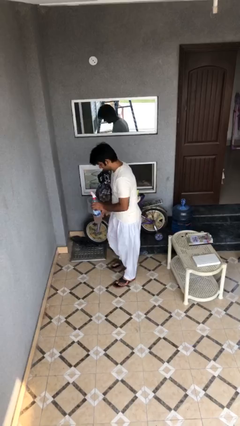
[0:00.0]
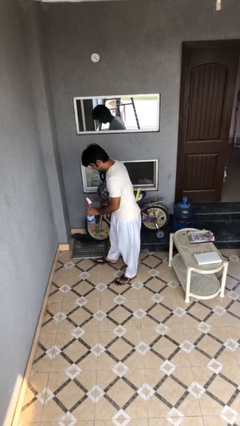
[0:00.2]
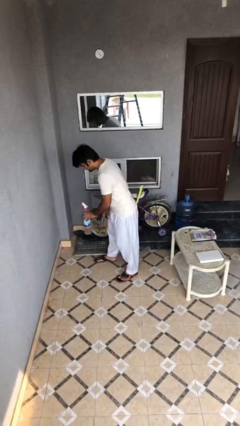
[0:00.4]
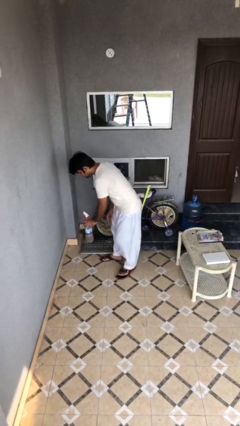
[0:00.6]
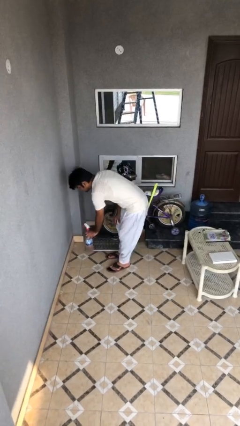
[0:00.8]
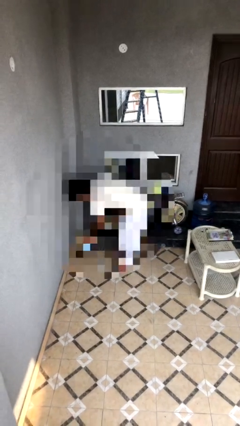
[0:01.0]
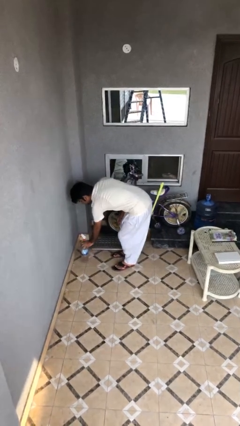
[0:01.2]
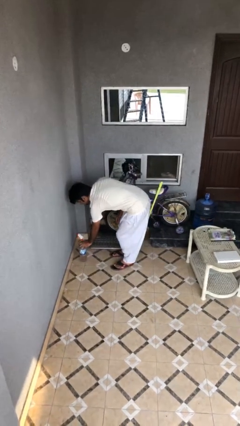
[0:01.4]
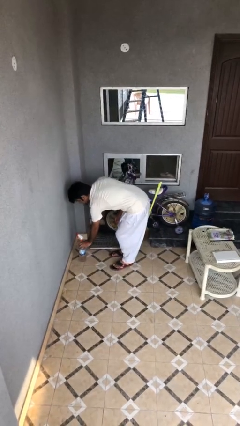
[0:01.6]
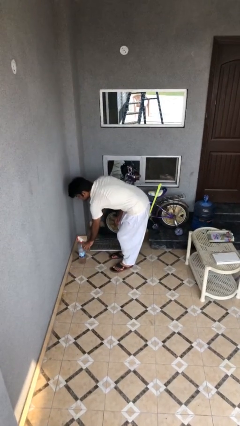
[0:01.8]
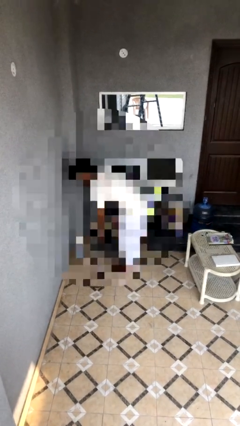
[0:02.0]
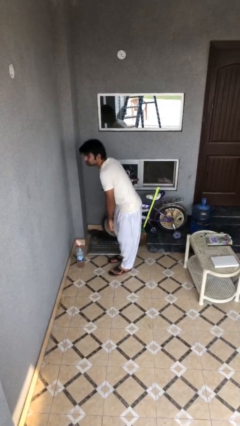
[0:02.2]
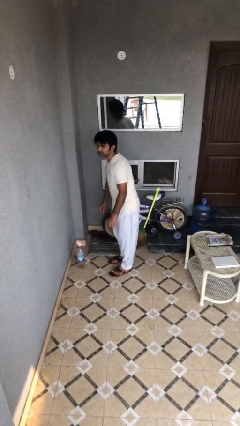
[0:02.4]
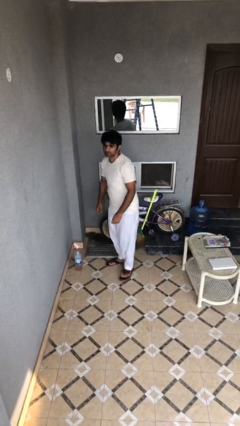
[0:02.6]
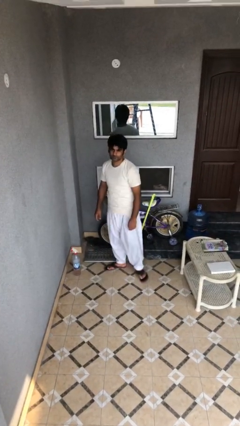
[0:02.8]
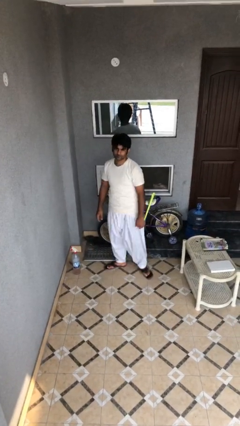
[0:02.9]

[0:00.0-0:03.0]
person puts down object on floor

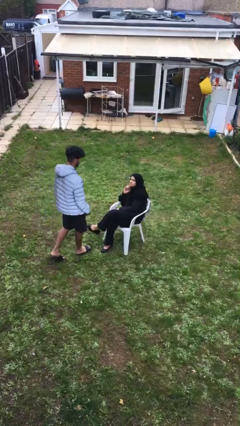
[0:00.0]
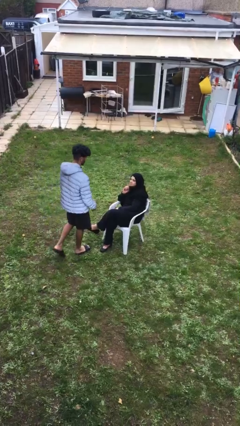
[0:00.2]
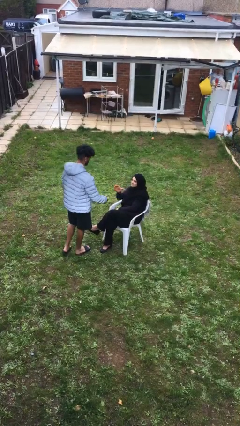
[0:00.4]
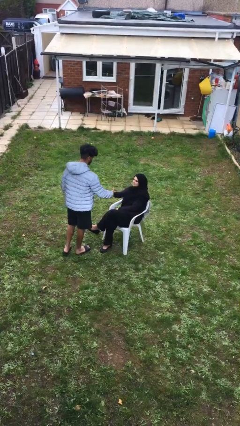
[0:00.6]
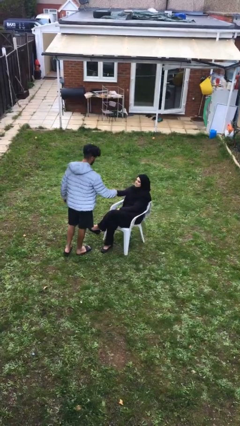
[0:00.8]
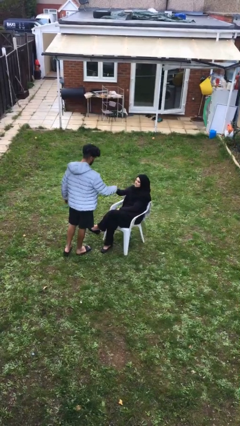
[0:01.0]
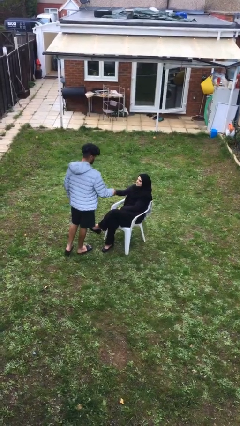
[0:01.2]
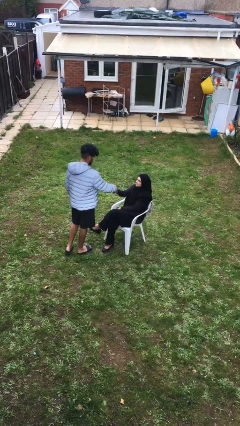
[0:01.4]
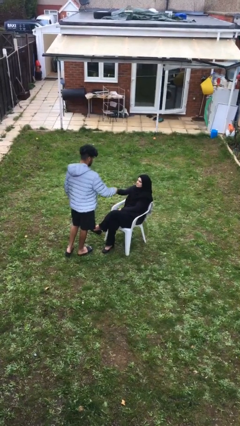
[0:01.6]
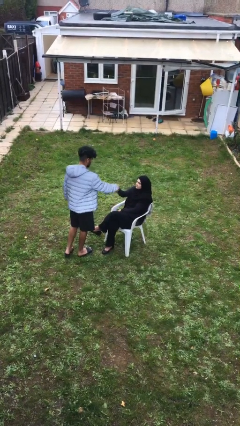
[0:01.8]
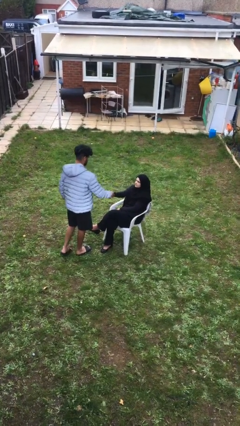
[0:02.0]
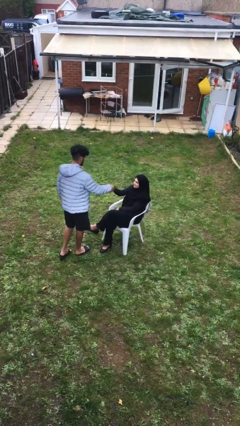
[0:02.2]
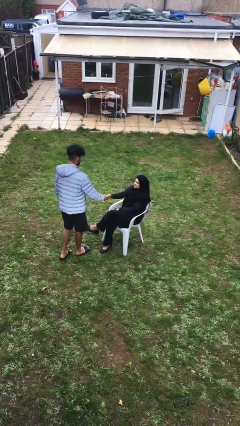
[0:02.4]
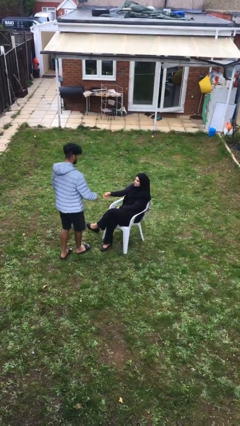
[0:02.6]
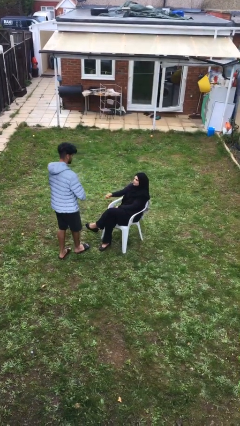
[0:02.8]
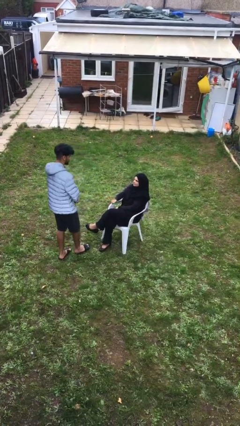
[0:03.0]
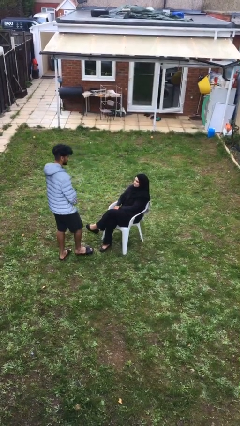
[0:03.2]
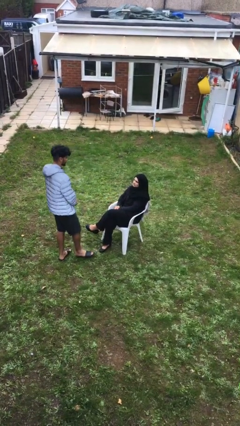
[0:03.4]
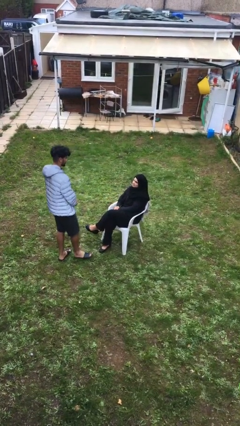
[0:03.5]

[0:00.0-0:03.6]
person shakes hand

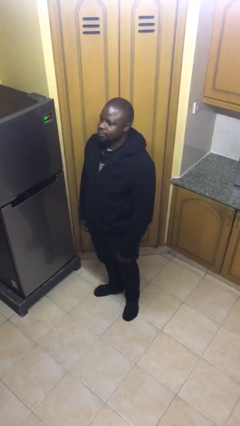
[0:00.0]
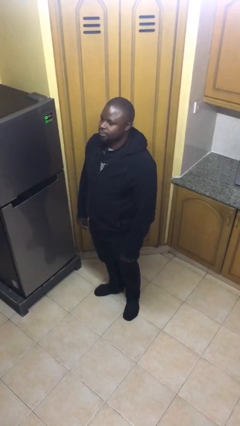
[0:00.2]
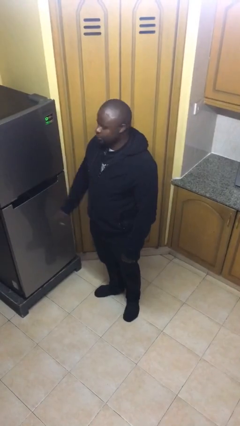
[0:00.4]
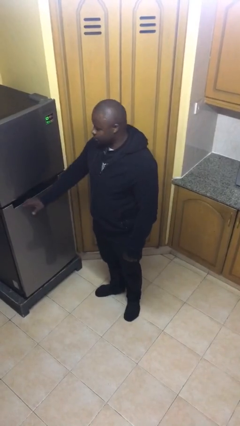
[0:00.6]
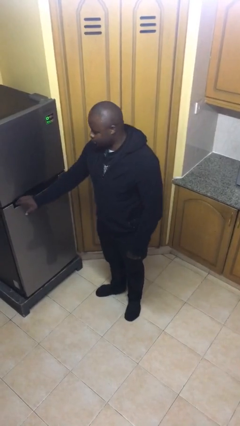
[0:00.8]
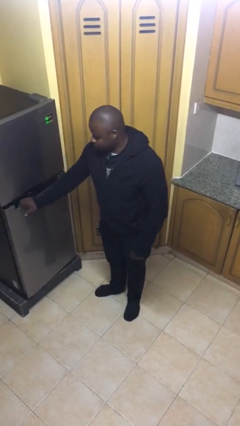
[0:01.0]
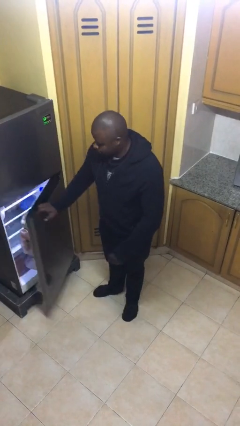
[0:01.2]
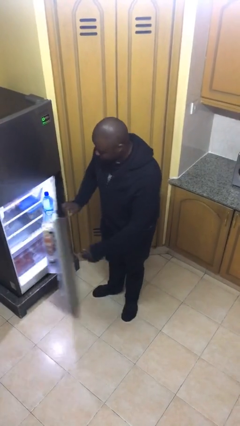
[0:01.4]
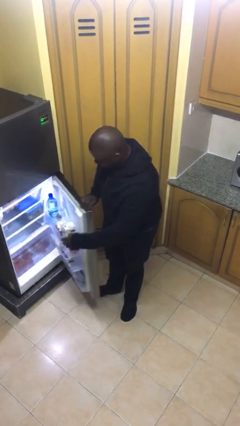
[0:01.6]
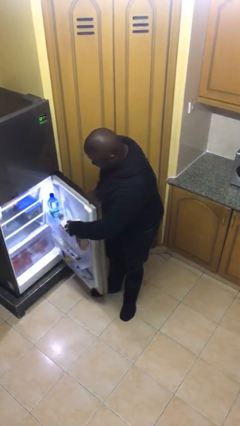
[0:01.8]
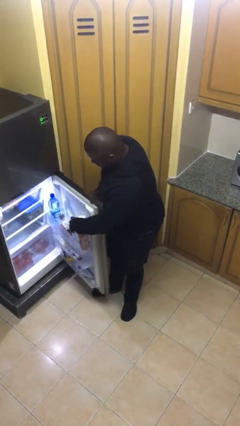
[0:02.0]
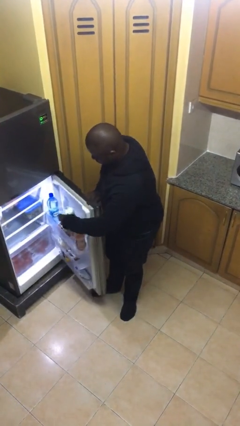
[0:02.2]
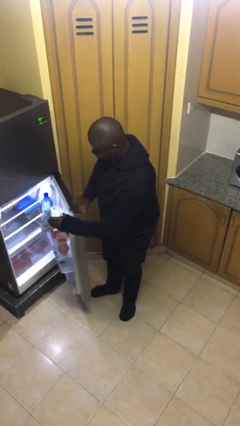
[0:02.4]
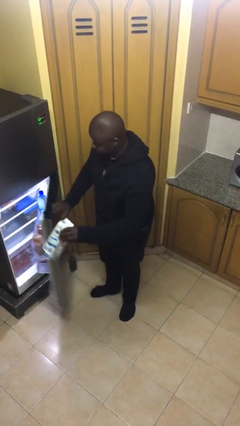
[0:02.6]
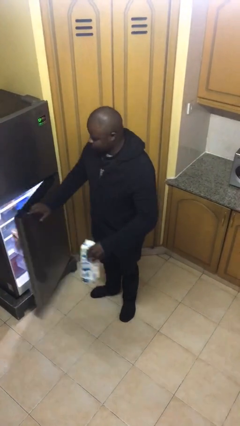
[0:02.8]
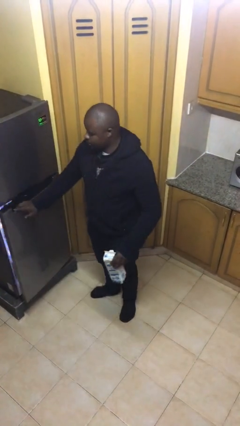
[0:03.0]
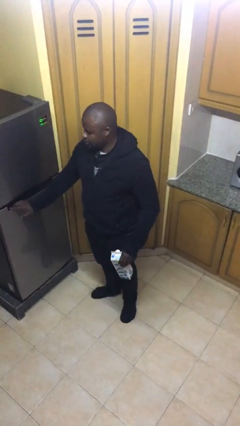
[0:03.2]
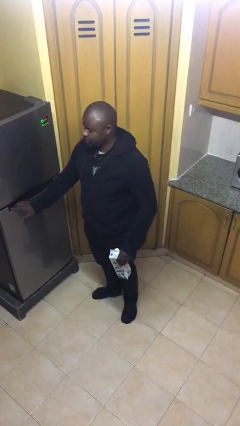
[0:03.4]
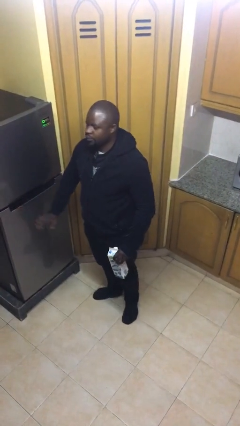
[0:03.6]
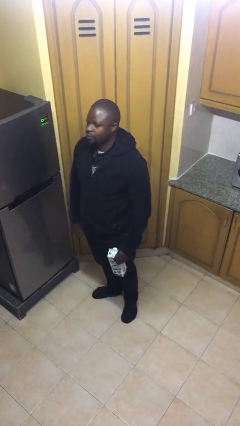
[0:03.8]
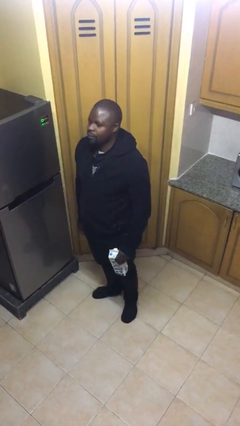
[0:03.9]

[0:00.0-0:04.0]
person takes object from refrigerator

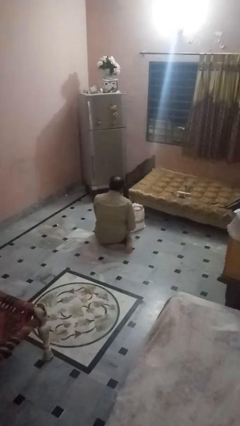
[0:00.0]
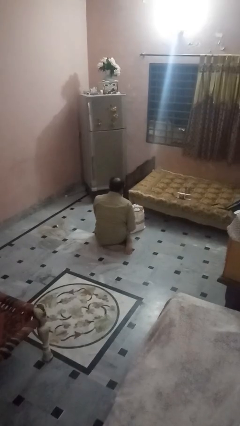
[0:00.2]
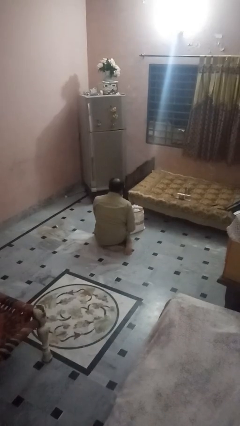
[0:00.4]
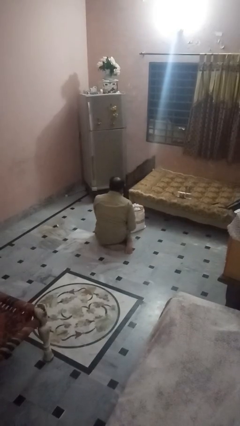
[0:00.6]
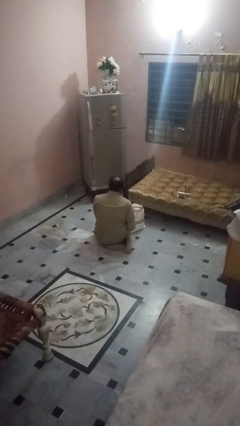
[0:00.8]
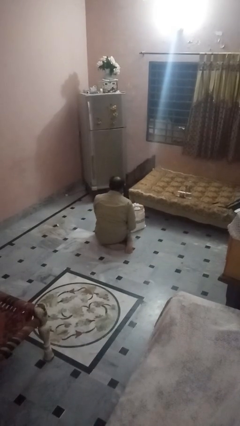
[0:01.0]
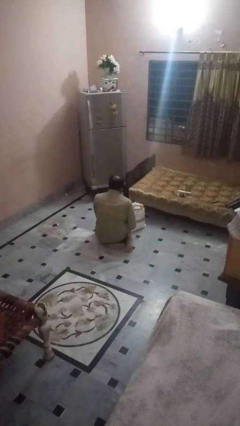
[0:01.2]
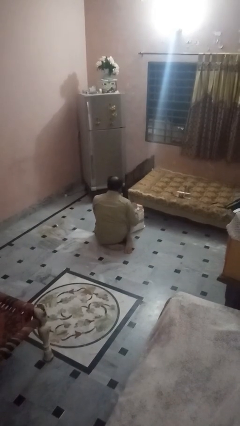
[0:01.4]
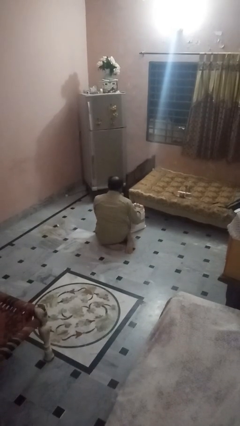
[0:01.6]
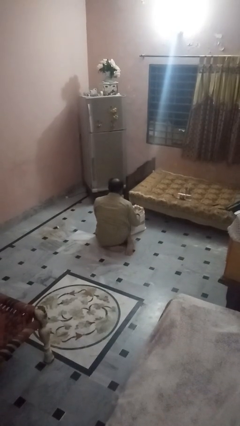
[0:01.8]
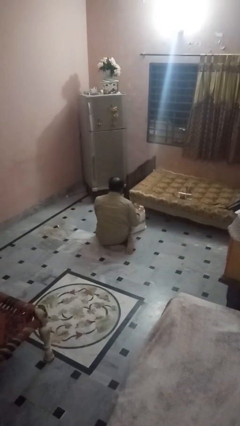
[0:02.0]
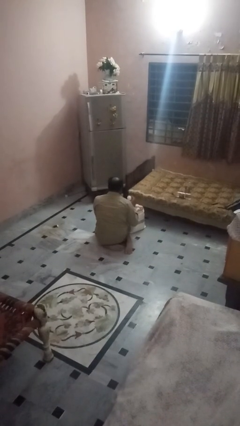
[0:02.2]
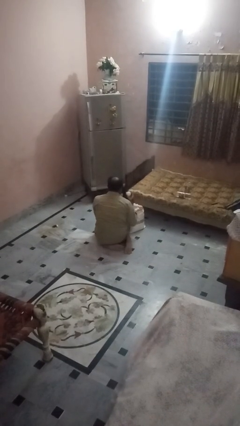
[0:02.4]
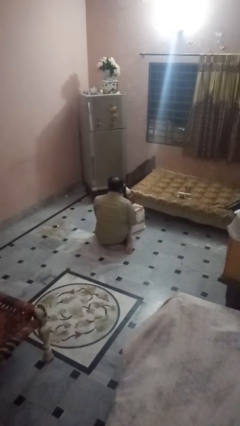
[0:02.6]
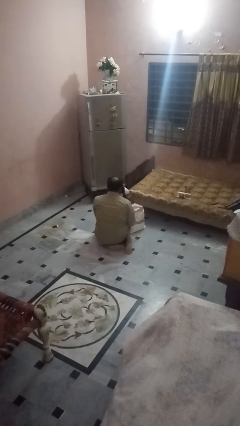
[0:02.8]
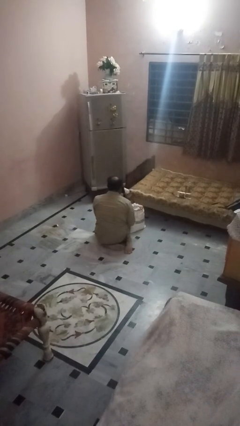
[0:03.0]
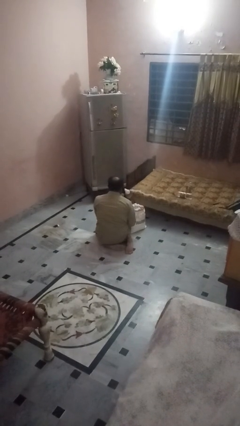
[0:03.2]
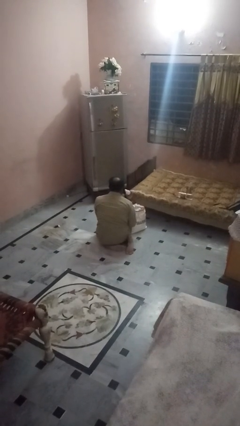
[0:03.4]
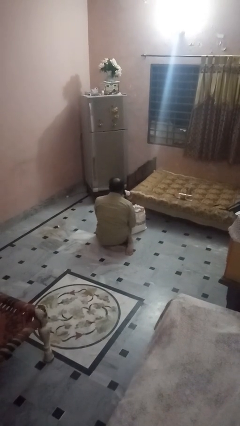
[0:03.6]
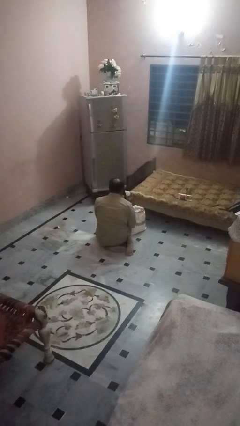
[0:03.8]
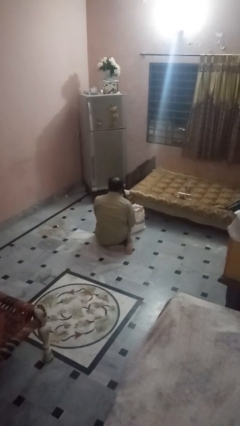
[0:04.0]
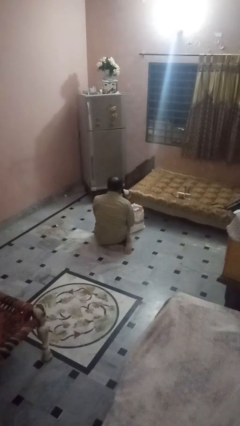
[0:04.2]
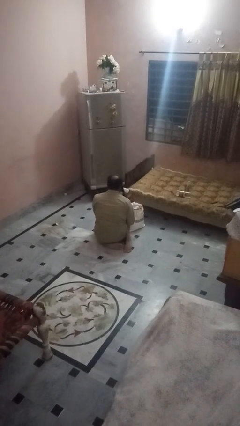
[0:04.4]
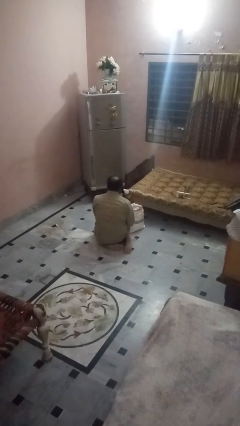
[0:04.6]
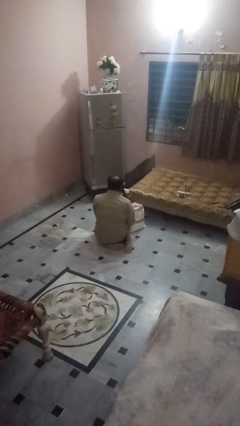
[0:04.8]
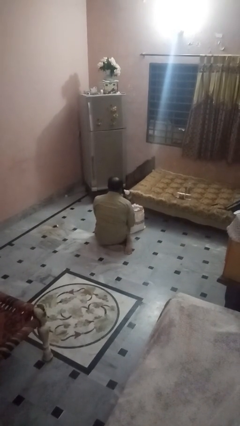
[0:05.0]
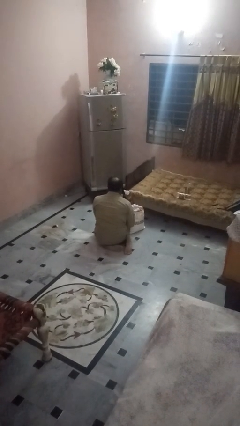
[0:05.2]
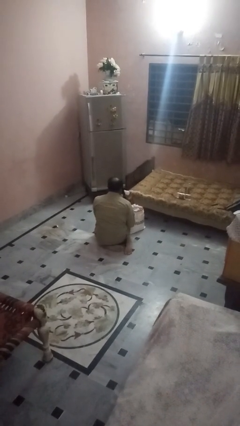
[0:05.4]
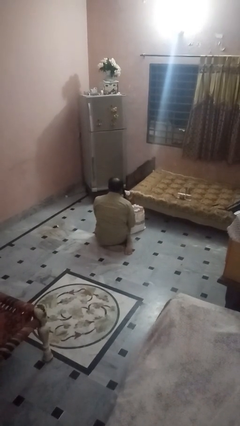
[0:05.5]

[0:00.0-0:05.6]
person takes object from bag

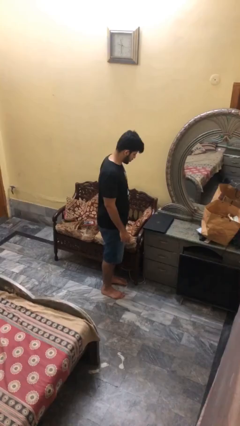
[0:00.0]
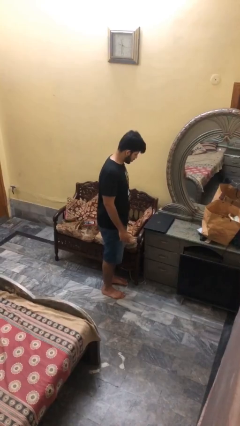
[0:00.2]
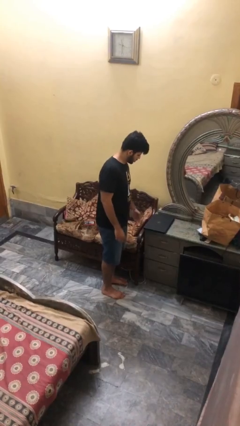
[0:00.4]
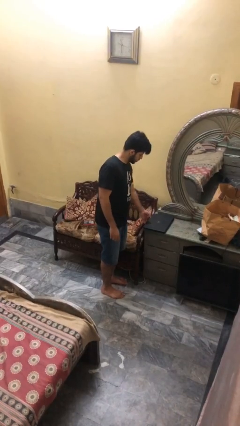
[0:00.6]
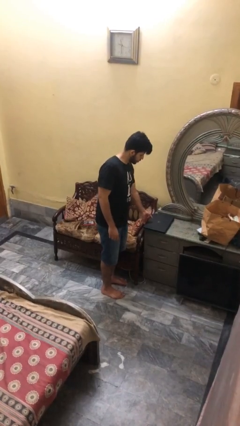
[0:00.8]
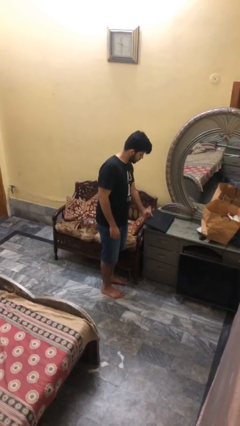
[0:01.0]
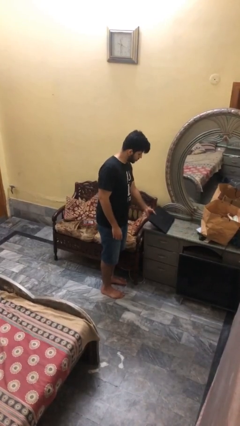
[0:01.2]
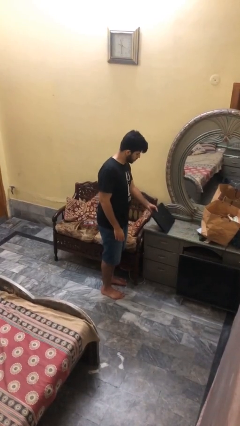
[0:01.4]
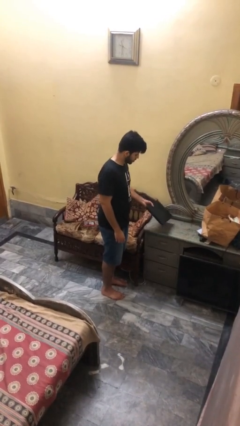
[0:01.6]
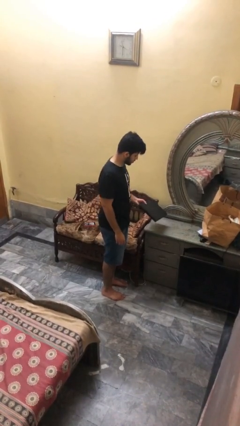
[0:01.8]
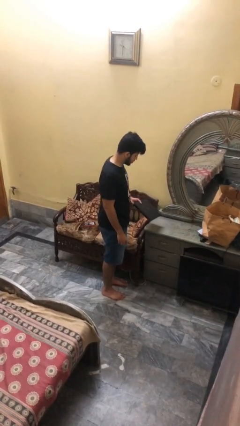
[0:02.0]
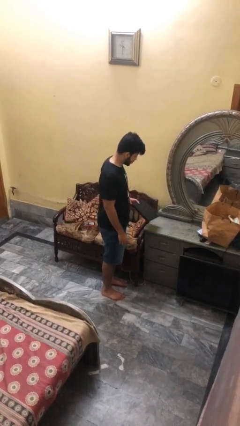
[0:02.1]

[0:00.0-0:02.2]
person picks up object from countertop
